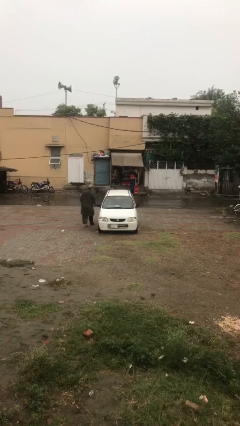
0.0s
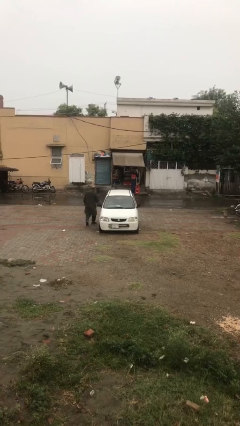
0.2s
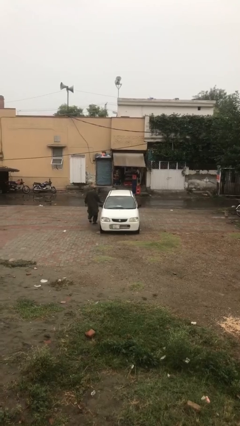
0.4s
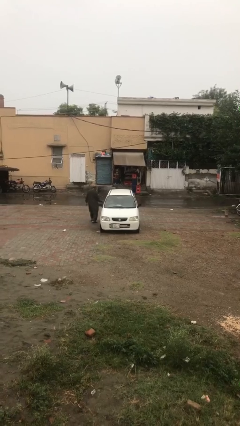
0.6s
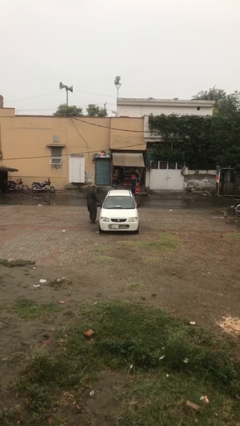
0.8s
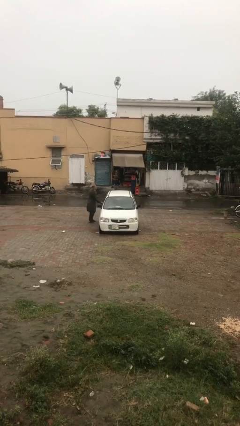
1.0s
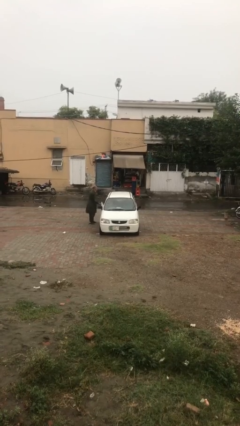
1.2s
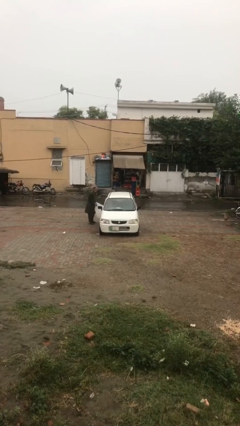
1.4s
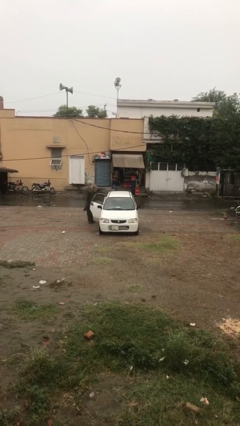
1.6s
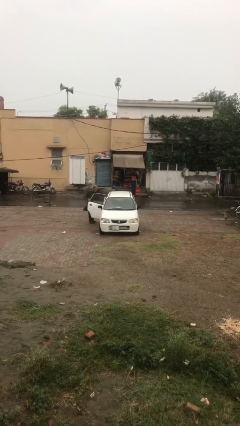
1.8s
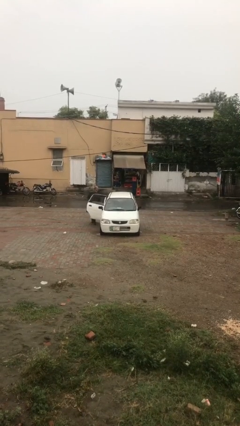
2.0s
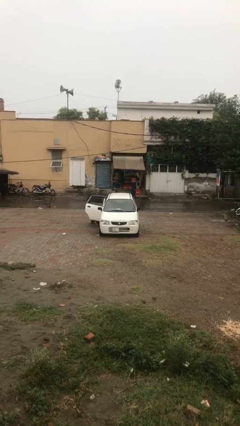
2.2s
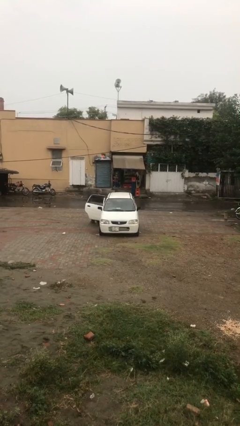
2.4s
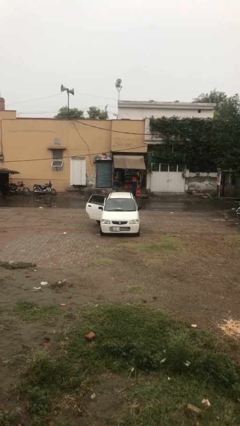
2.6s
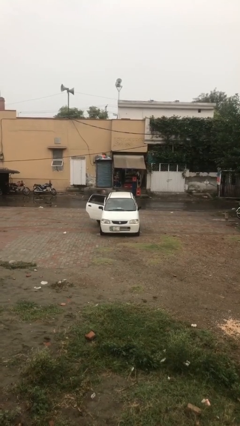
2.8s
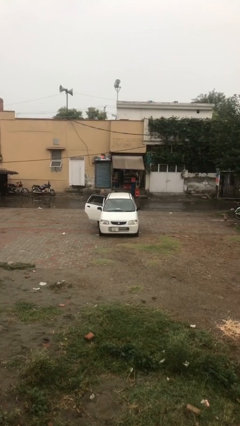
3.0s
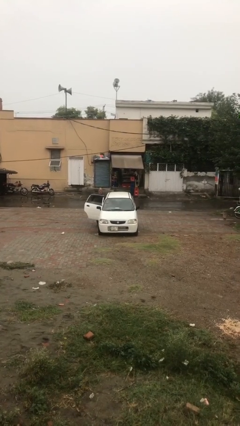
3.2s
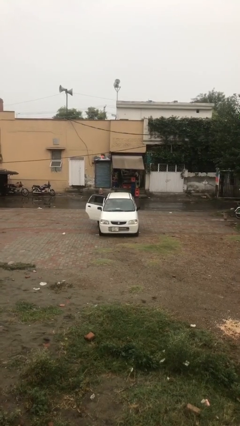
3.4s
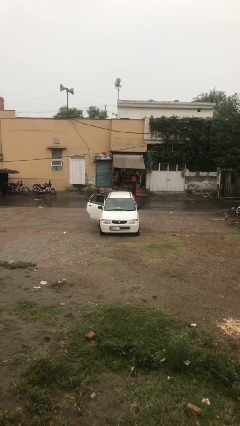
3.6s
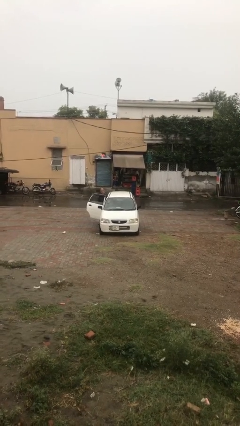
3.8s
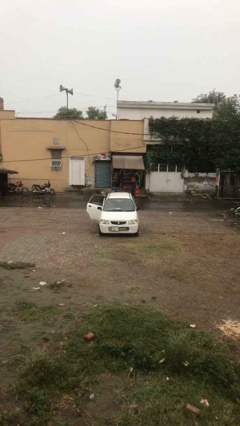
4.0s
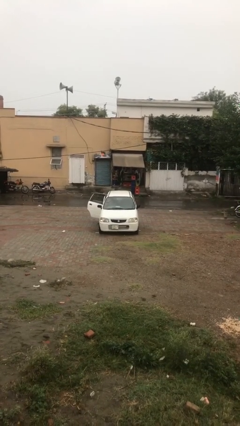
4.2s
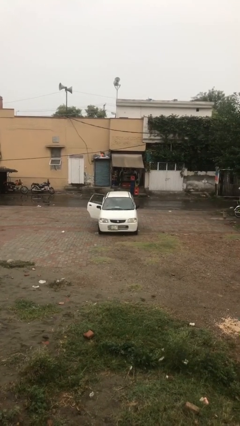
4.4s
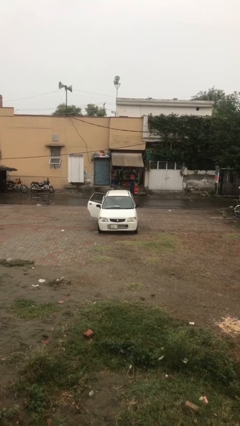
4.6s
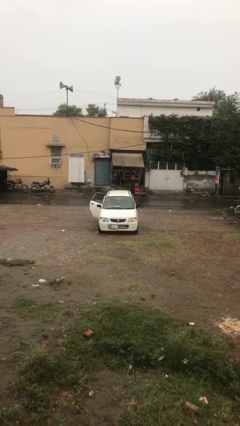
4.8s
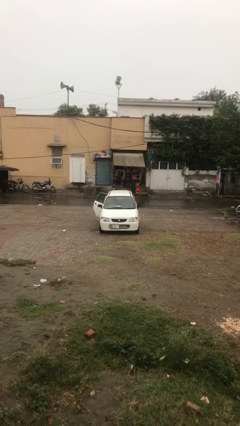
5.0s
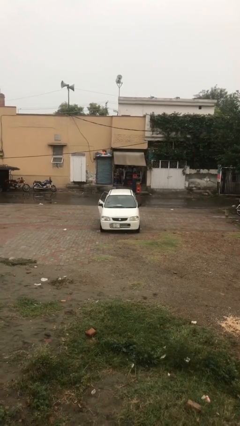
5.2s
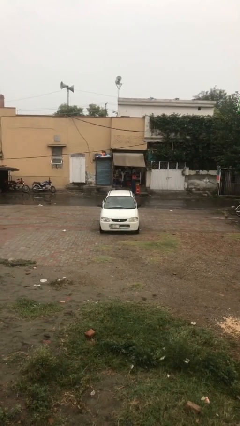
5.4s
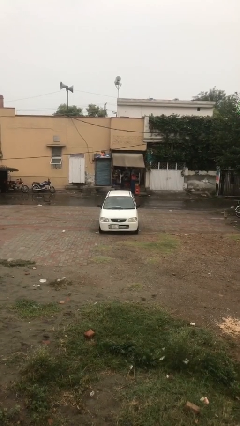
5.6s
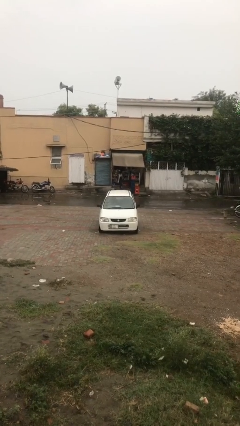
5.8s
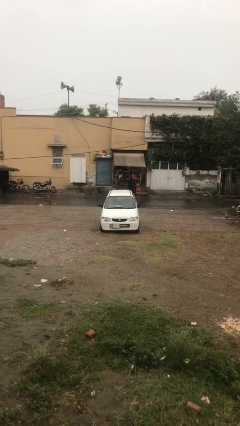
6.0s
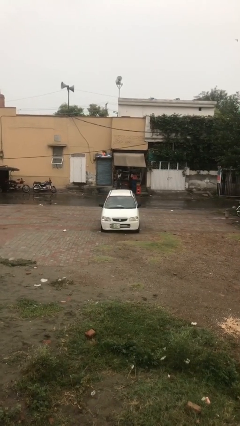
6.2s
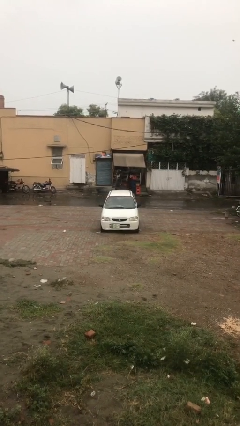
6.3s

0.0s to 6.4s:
car picks up person

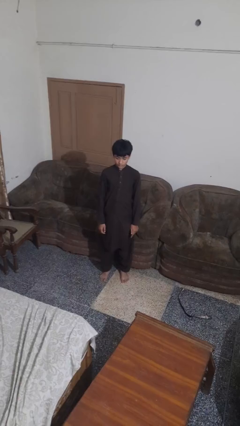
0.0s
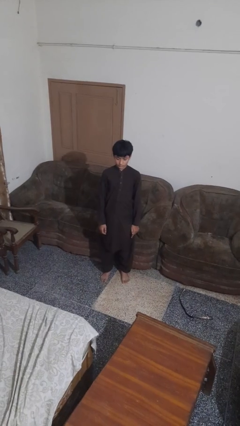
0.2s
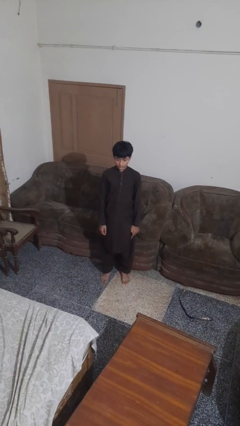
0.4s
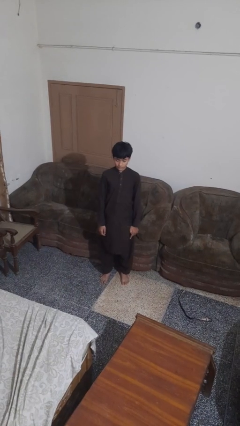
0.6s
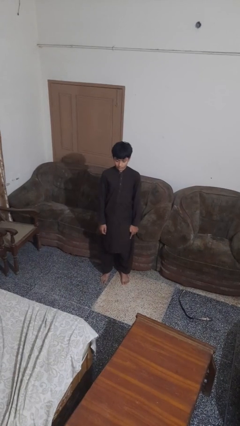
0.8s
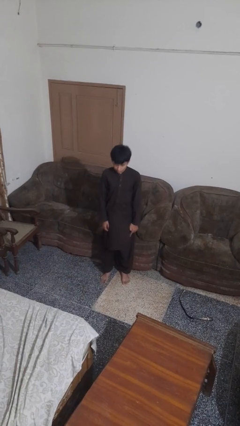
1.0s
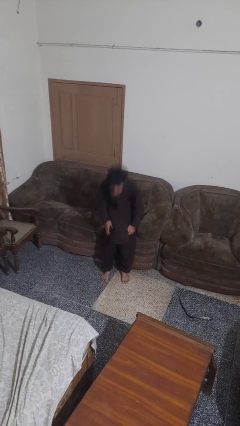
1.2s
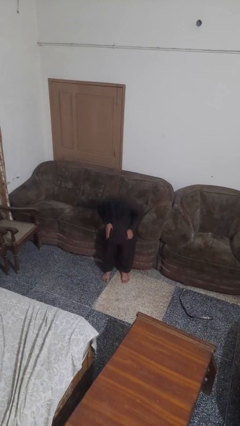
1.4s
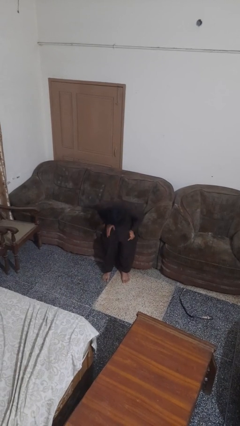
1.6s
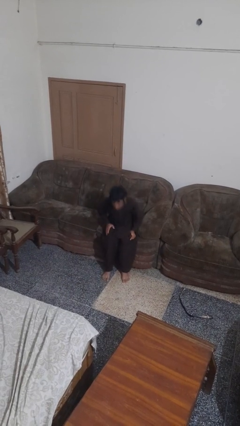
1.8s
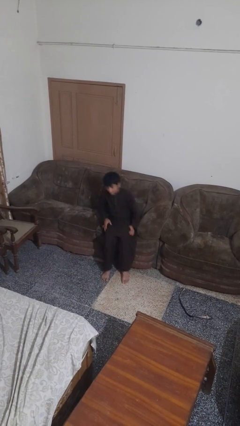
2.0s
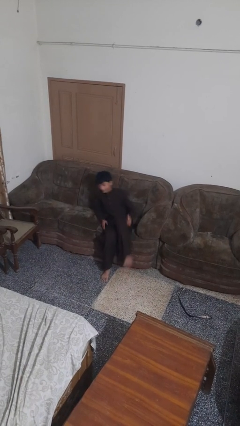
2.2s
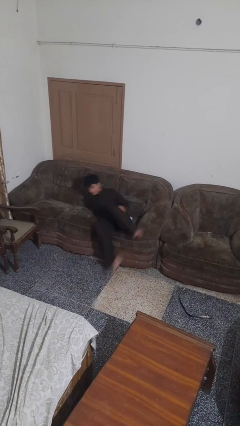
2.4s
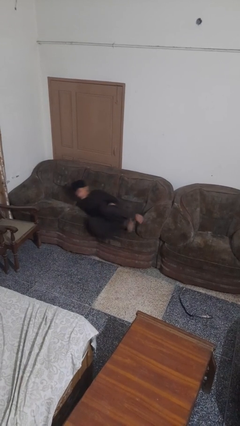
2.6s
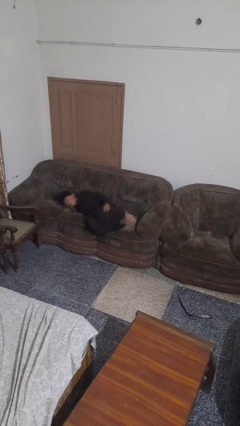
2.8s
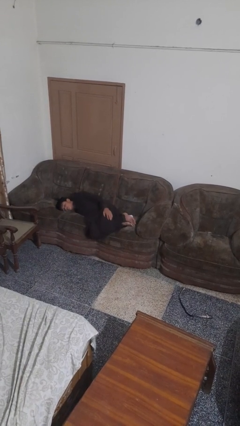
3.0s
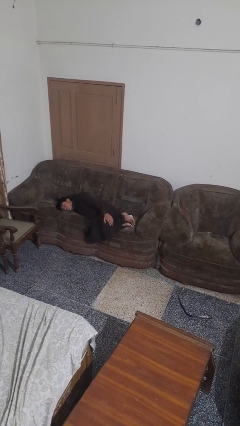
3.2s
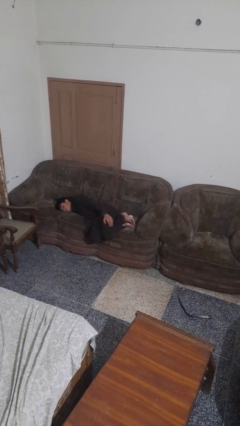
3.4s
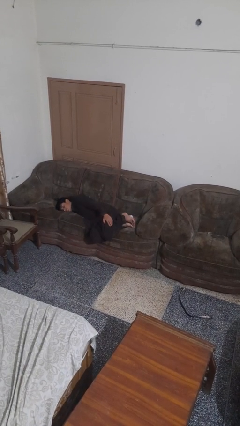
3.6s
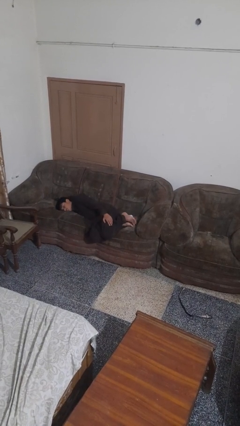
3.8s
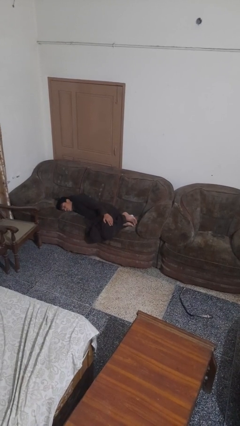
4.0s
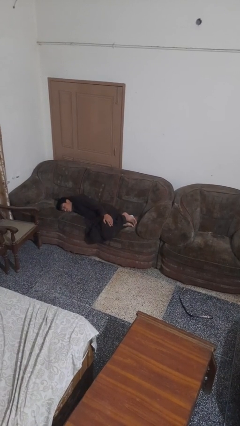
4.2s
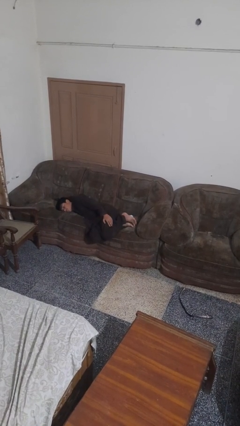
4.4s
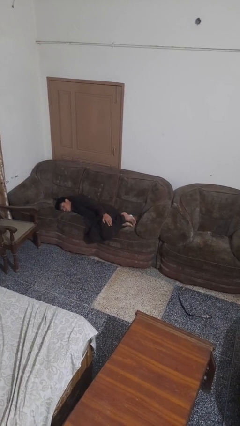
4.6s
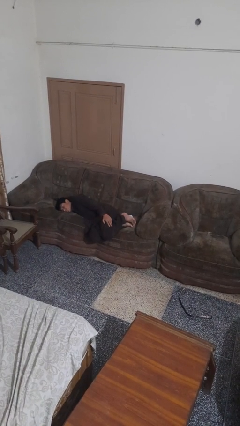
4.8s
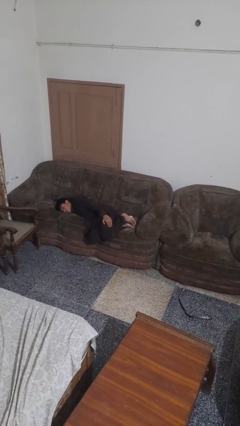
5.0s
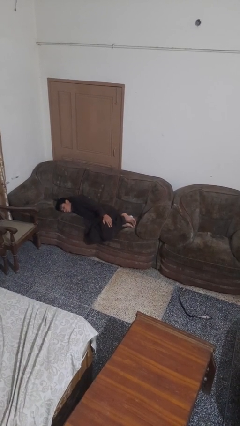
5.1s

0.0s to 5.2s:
person lies down on couch

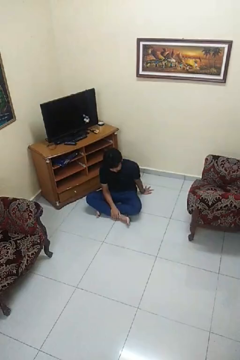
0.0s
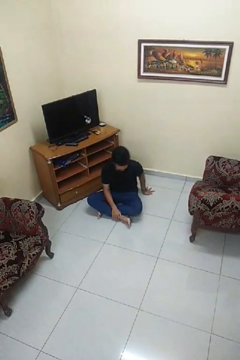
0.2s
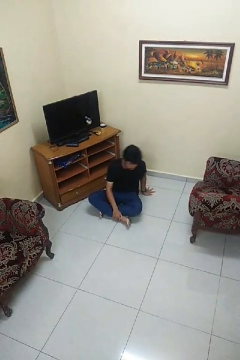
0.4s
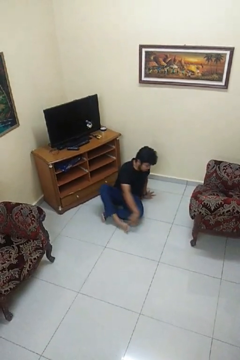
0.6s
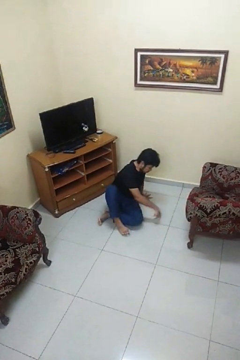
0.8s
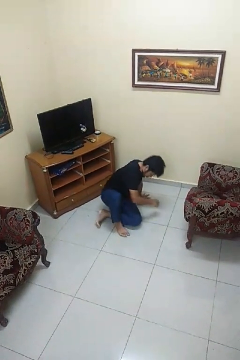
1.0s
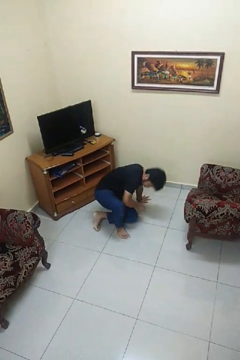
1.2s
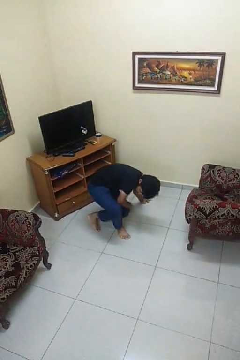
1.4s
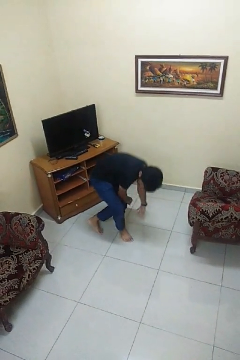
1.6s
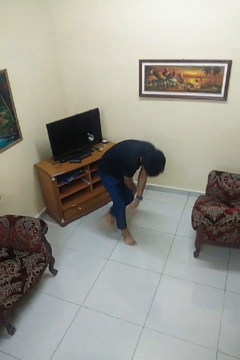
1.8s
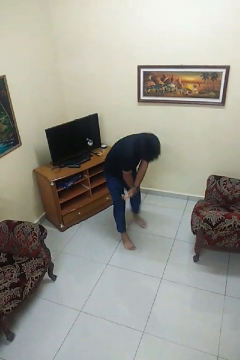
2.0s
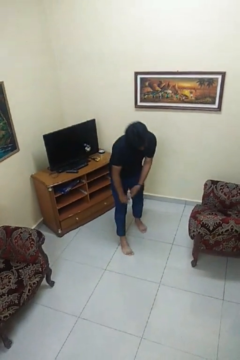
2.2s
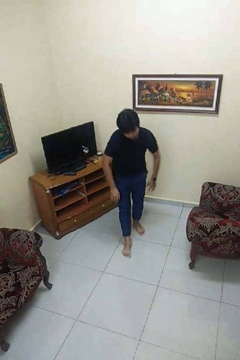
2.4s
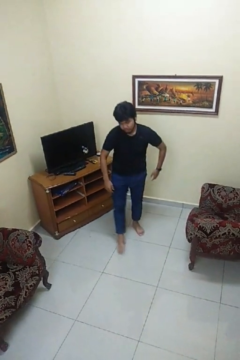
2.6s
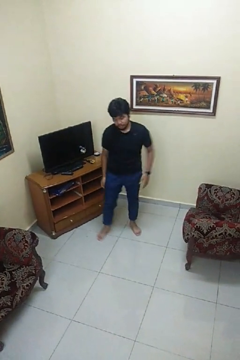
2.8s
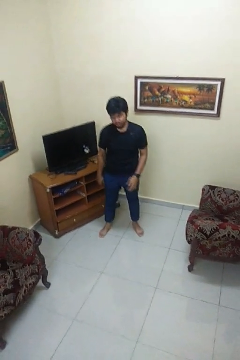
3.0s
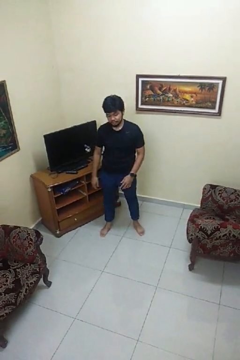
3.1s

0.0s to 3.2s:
person stands up from floor

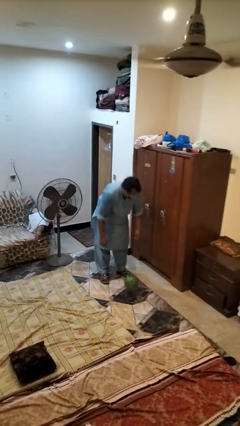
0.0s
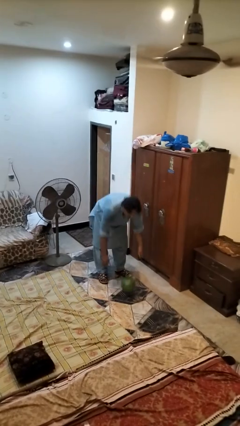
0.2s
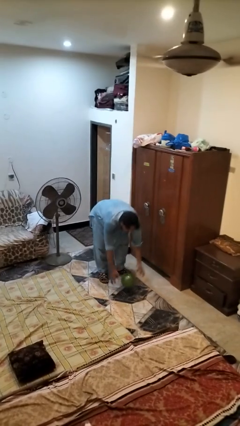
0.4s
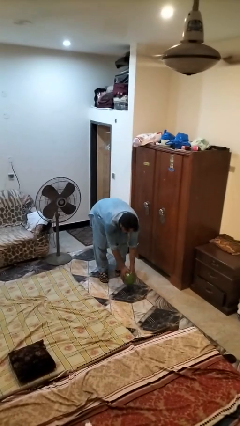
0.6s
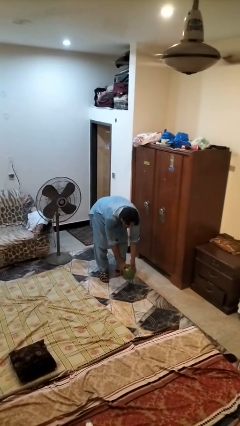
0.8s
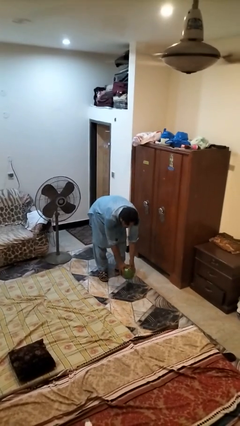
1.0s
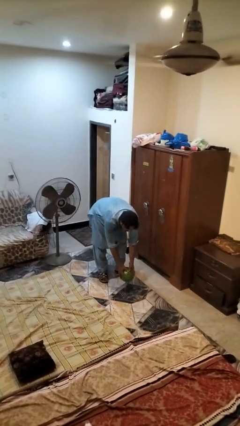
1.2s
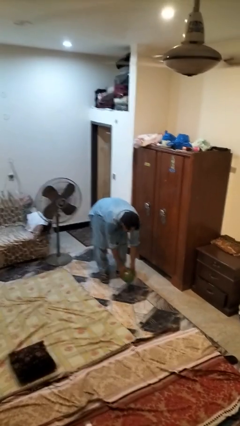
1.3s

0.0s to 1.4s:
person catches dropped object

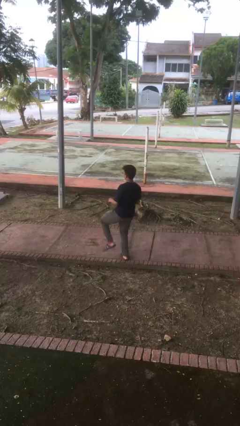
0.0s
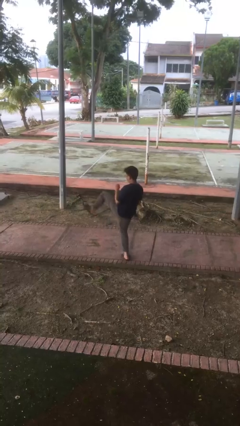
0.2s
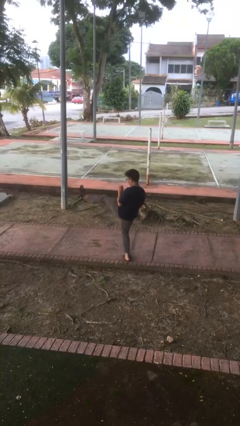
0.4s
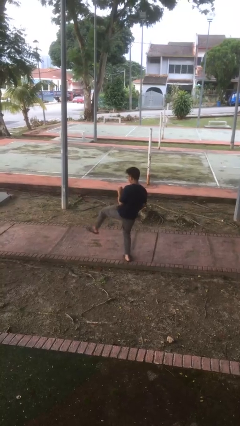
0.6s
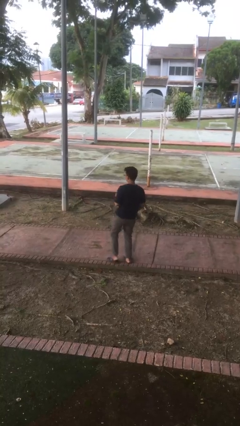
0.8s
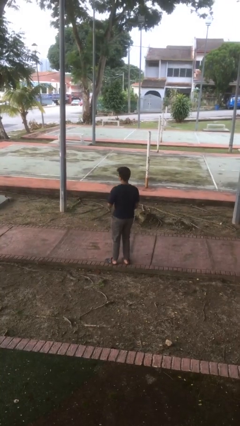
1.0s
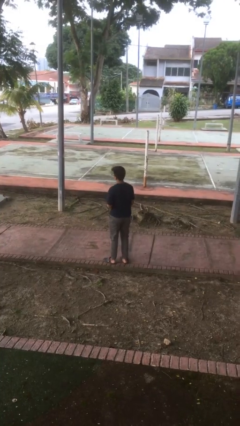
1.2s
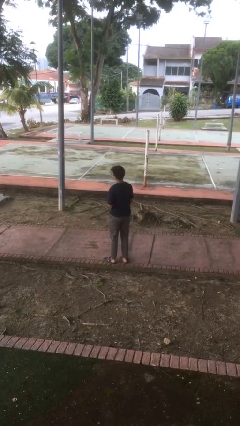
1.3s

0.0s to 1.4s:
person karate kicks

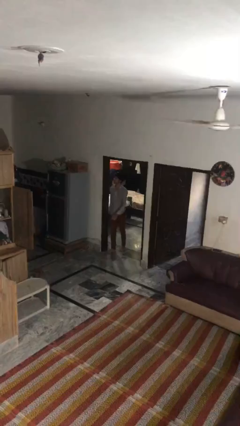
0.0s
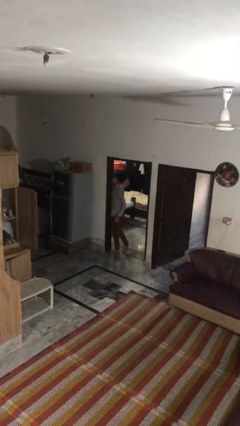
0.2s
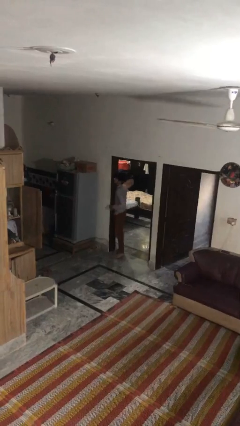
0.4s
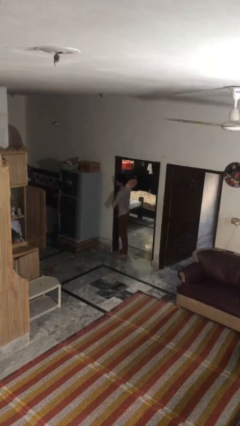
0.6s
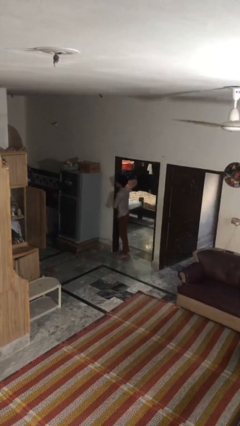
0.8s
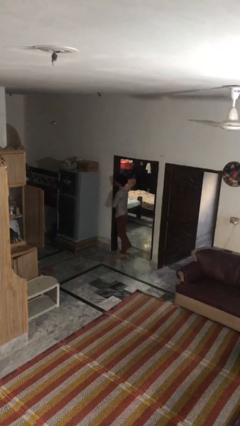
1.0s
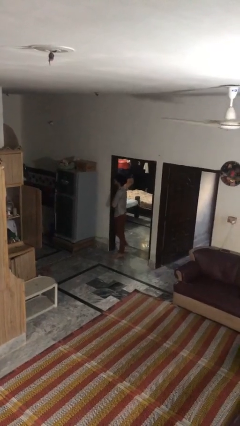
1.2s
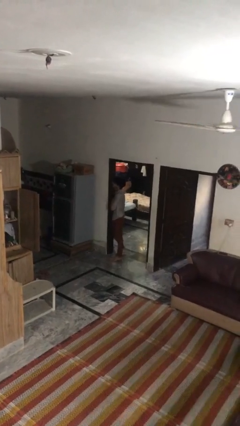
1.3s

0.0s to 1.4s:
person bumps into wall
